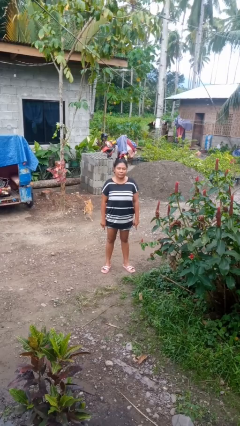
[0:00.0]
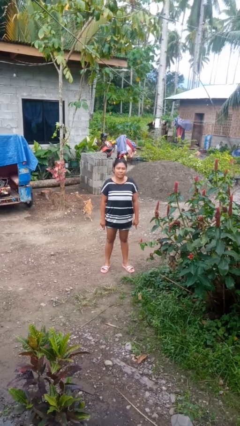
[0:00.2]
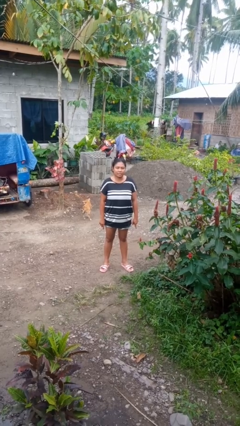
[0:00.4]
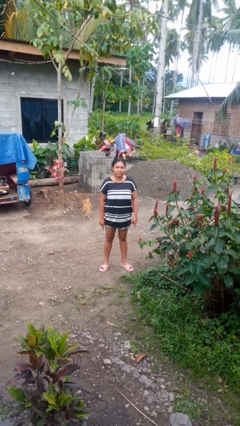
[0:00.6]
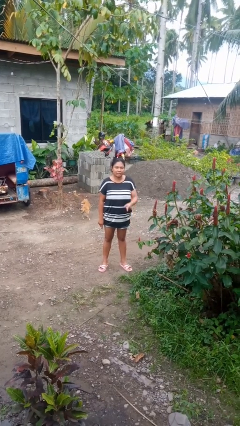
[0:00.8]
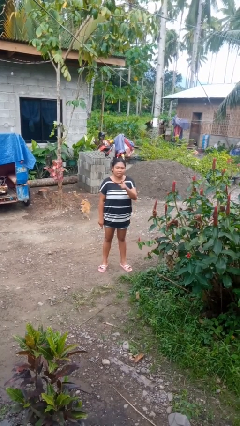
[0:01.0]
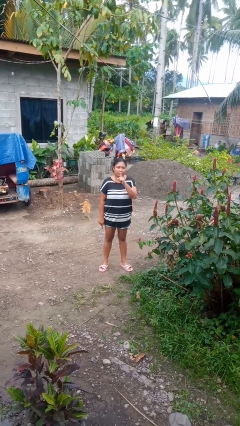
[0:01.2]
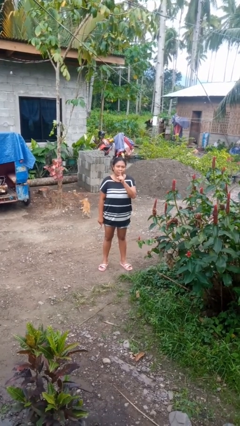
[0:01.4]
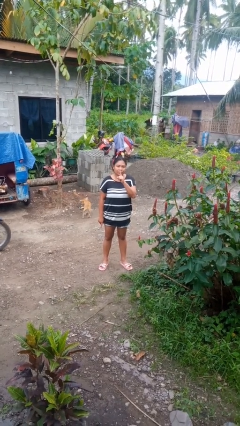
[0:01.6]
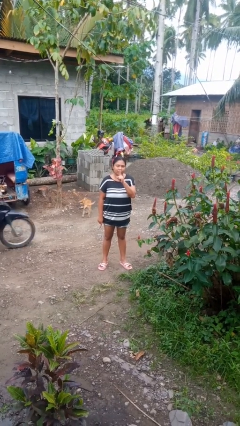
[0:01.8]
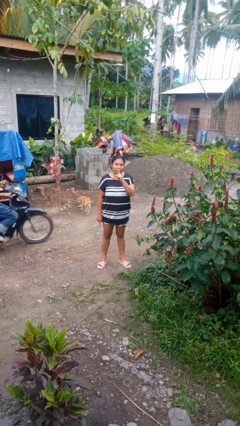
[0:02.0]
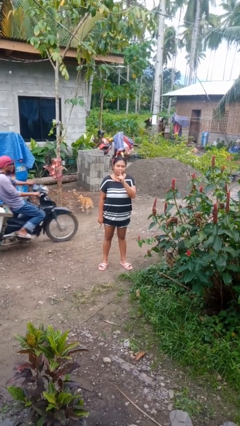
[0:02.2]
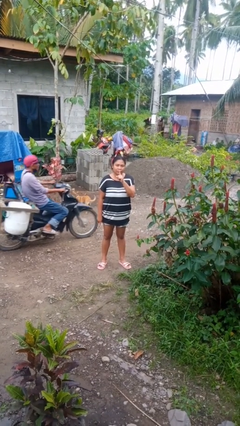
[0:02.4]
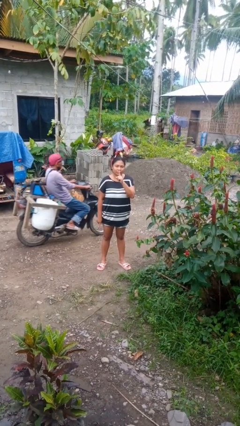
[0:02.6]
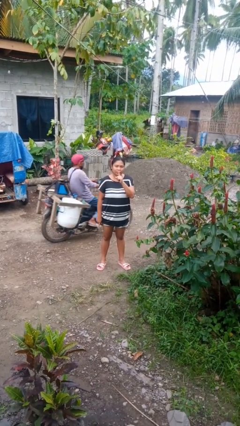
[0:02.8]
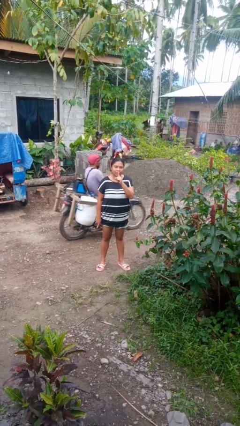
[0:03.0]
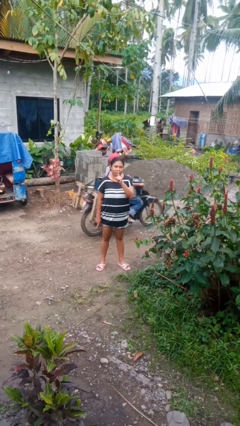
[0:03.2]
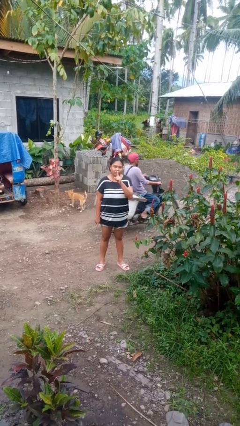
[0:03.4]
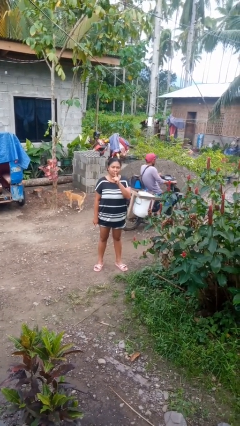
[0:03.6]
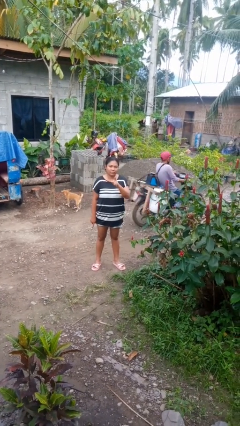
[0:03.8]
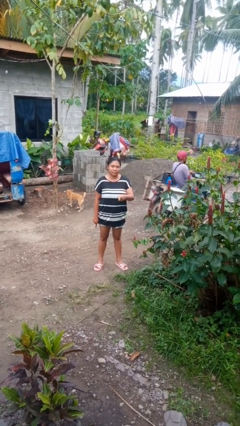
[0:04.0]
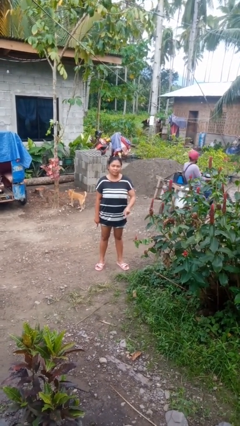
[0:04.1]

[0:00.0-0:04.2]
person gestures be quiet

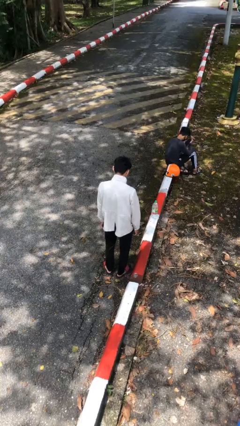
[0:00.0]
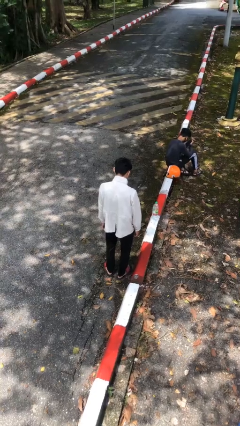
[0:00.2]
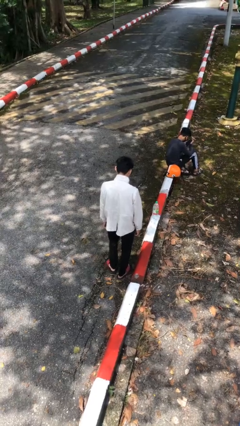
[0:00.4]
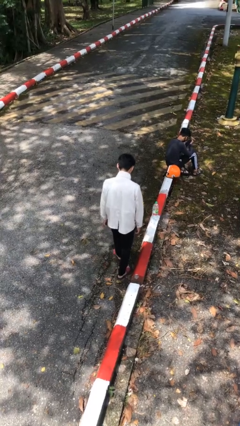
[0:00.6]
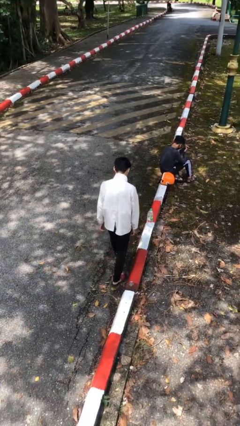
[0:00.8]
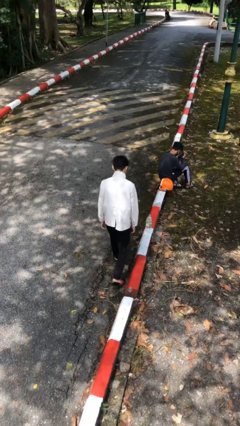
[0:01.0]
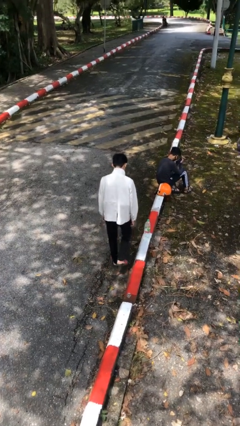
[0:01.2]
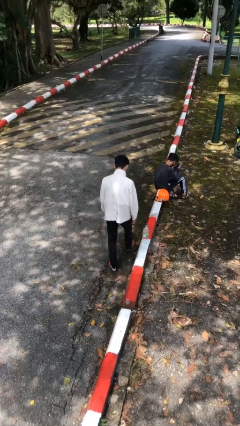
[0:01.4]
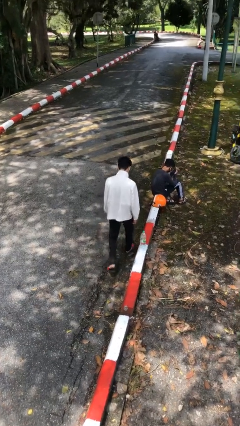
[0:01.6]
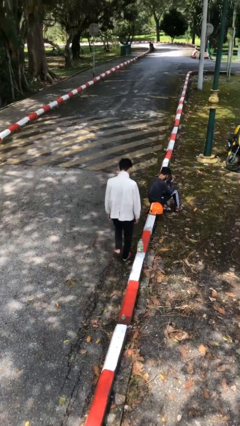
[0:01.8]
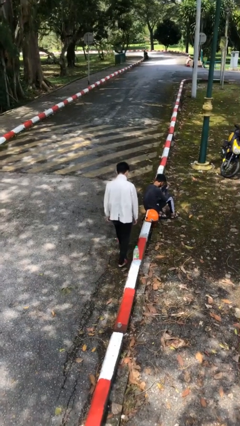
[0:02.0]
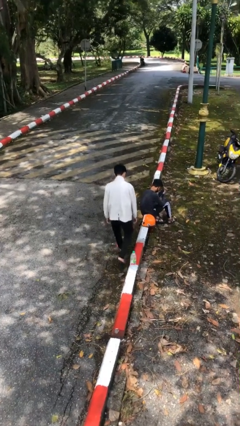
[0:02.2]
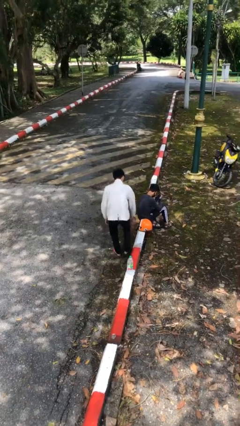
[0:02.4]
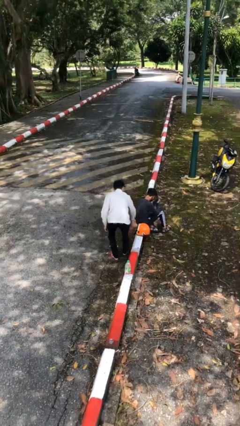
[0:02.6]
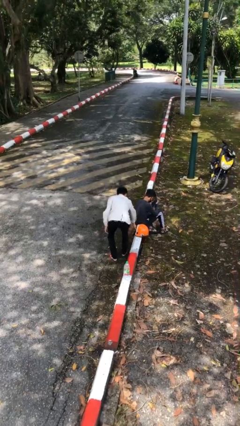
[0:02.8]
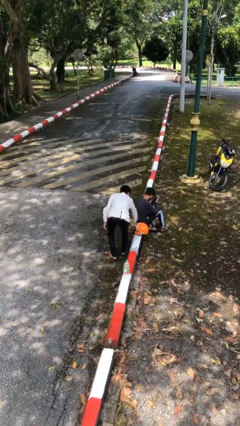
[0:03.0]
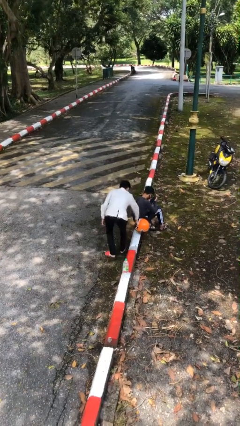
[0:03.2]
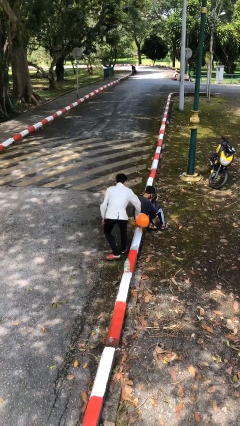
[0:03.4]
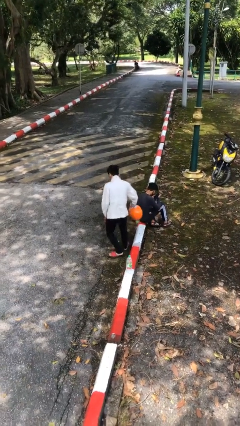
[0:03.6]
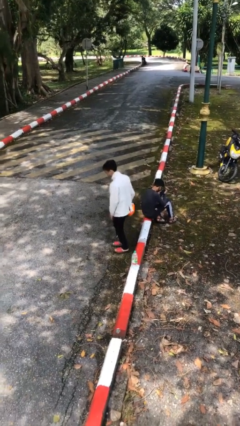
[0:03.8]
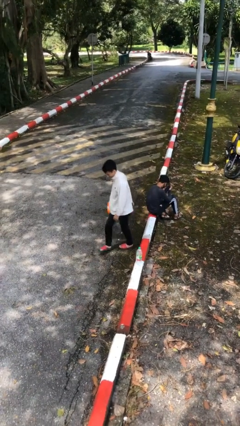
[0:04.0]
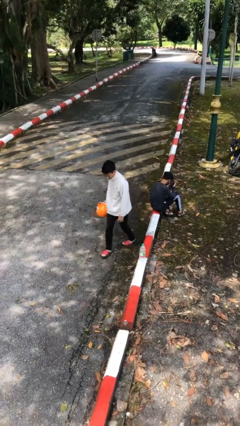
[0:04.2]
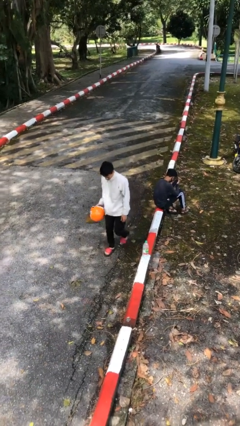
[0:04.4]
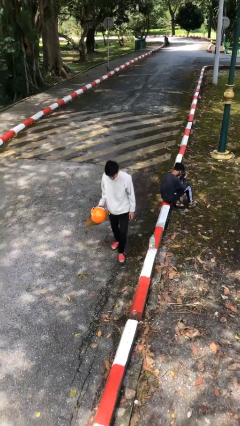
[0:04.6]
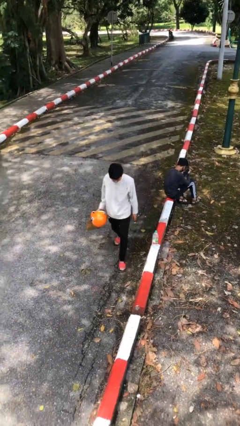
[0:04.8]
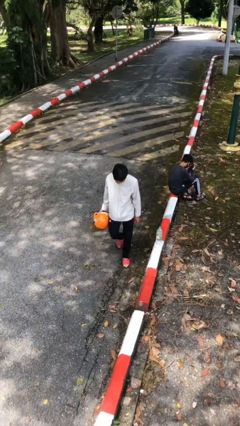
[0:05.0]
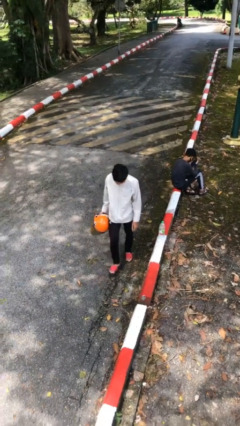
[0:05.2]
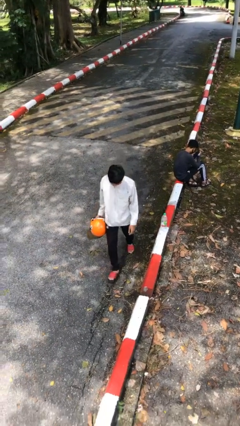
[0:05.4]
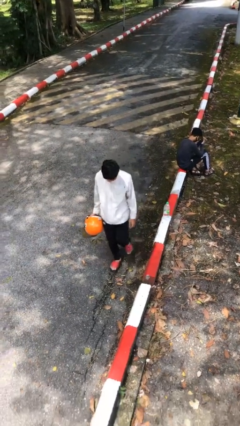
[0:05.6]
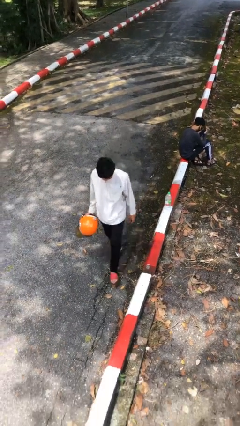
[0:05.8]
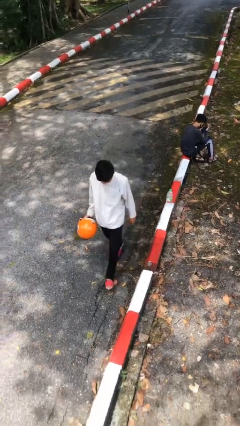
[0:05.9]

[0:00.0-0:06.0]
person steals object from person

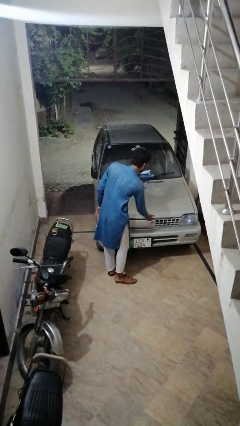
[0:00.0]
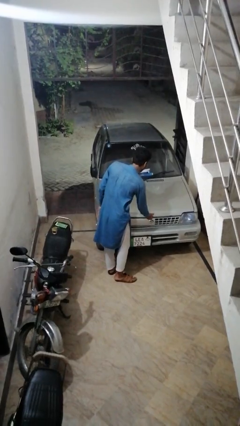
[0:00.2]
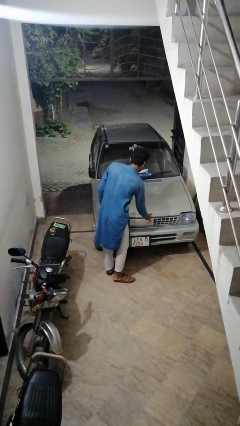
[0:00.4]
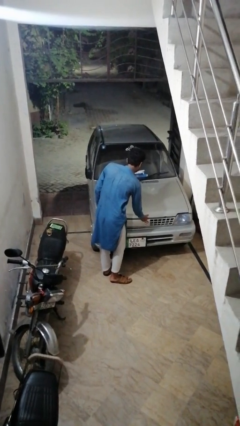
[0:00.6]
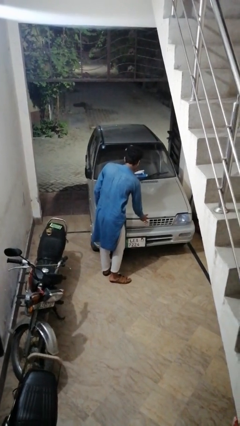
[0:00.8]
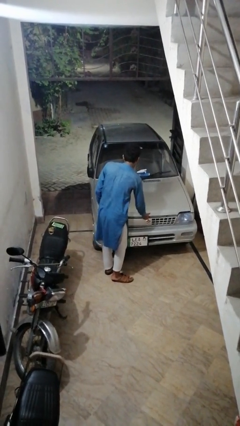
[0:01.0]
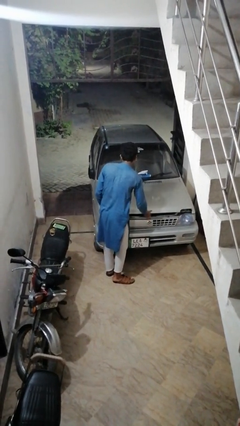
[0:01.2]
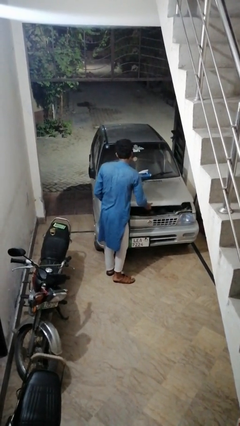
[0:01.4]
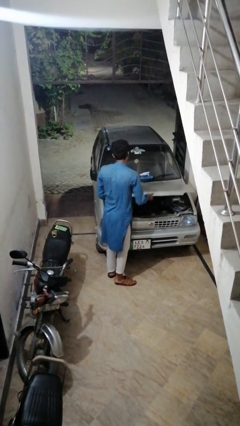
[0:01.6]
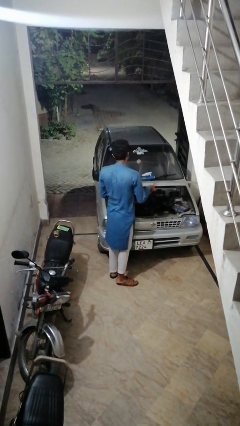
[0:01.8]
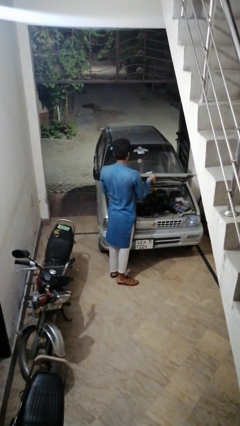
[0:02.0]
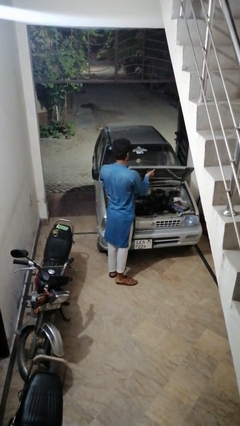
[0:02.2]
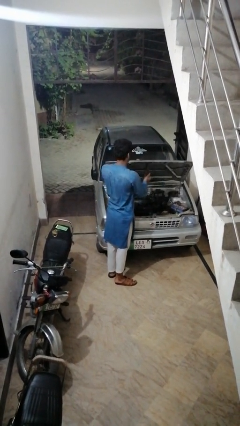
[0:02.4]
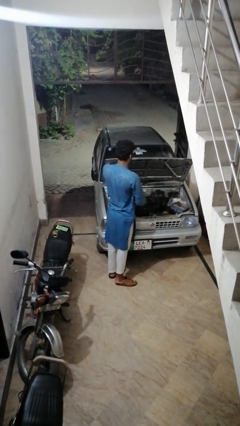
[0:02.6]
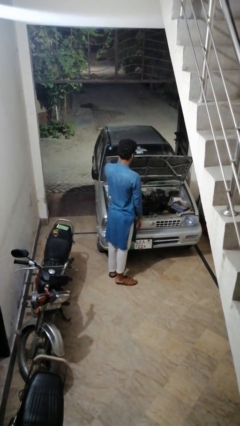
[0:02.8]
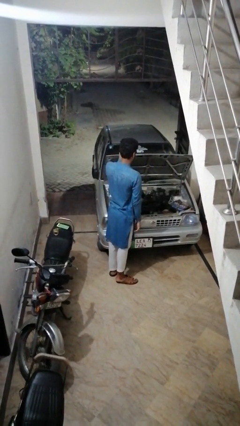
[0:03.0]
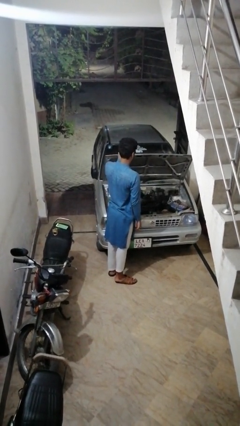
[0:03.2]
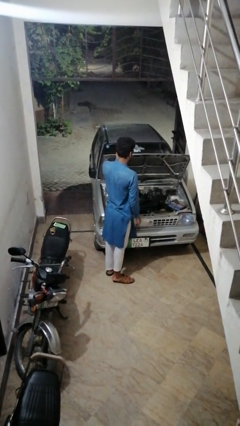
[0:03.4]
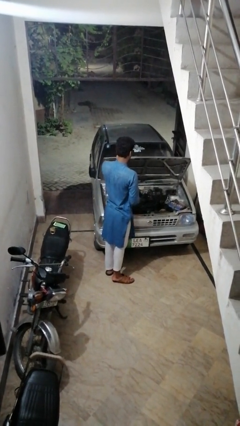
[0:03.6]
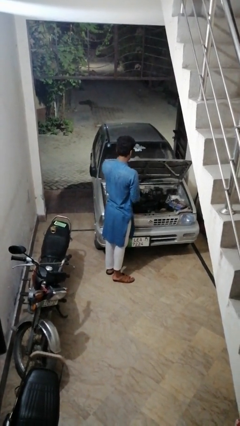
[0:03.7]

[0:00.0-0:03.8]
person opens car hood

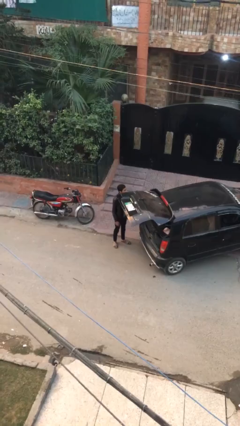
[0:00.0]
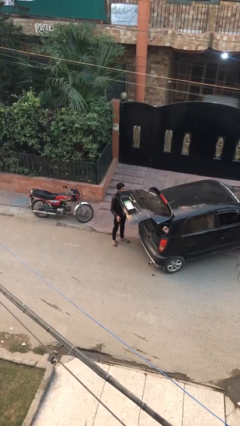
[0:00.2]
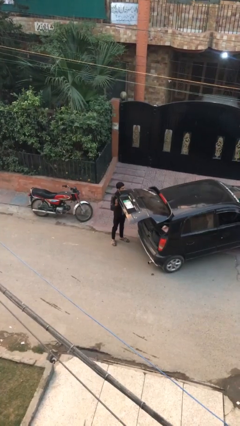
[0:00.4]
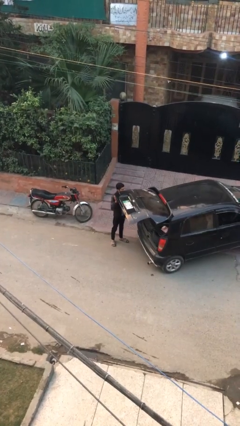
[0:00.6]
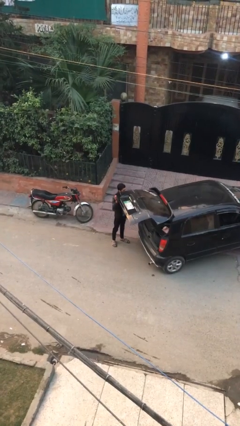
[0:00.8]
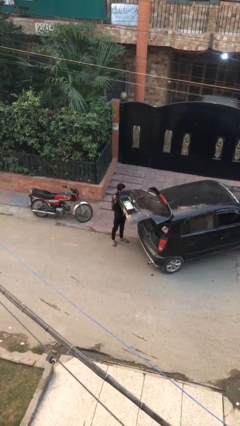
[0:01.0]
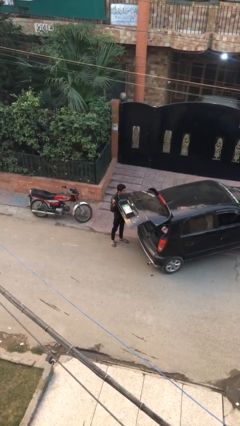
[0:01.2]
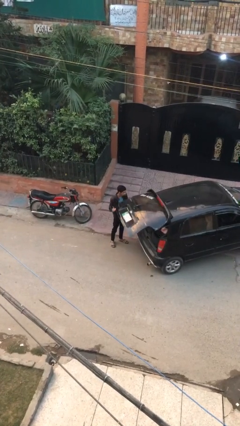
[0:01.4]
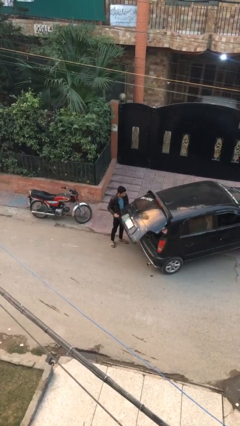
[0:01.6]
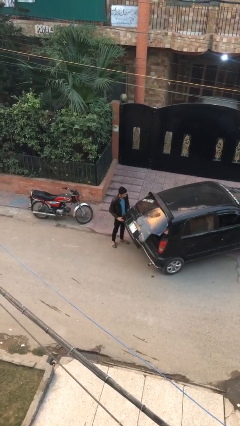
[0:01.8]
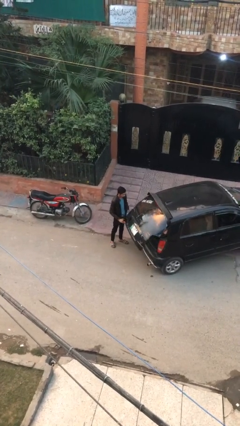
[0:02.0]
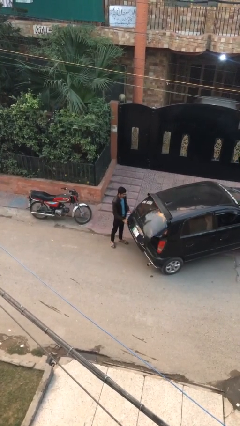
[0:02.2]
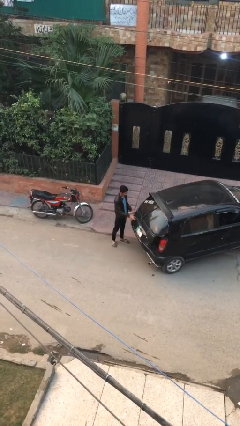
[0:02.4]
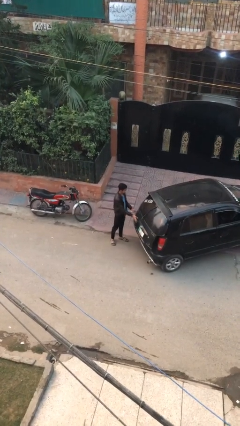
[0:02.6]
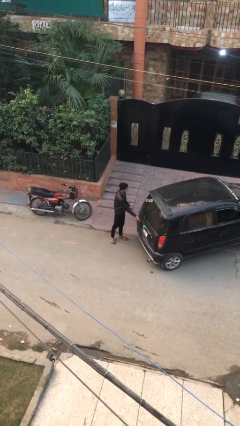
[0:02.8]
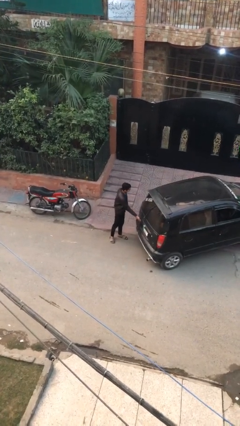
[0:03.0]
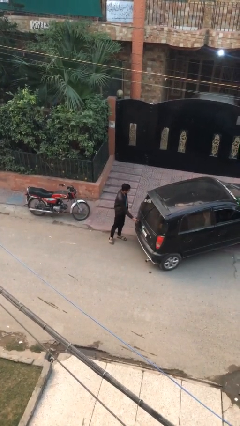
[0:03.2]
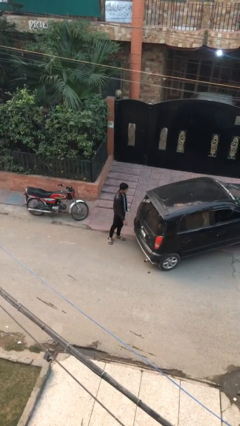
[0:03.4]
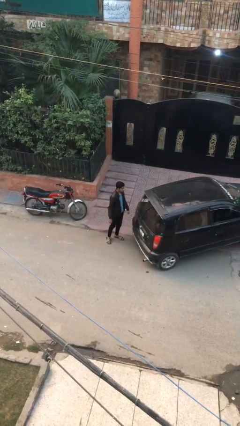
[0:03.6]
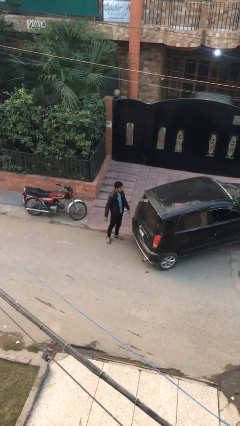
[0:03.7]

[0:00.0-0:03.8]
person closes car trunk

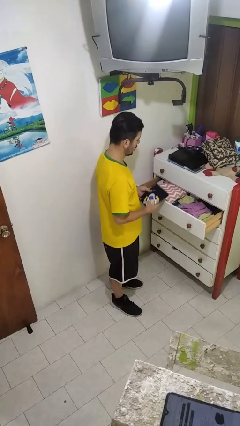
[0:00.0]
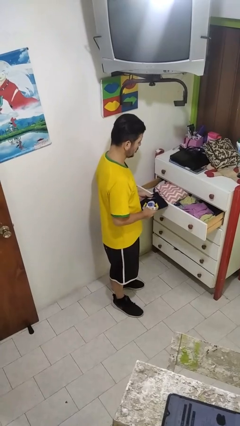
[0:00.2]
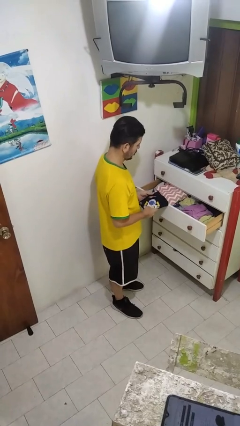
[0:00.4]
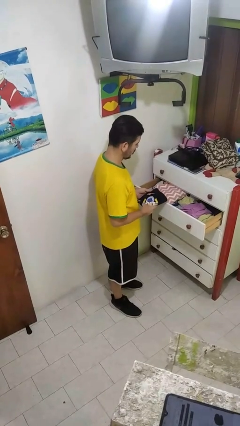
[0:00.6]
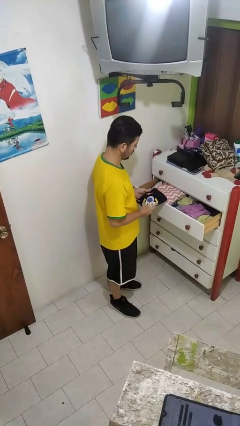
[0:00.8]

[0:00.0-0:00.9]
person takes clothes from dresser
